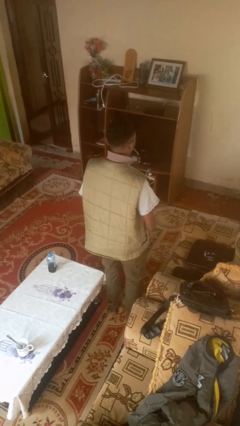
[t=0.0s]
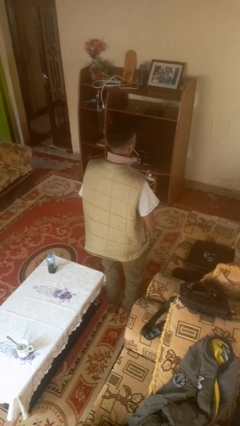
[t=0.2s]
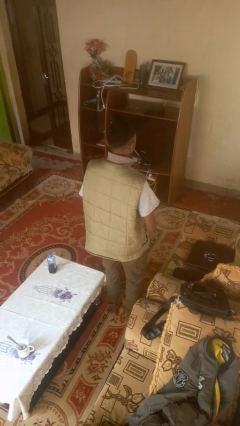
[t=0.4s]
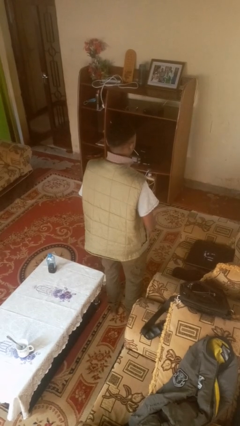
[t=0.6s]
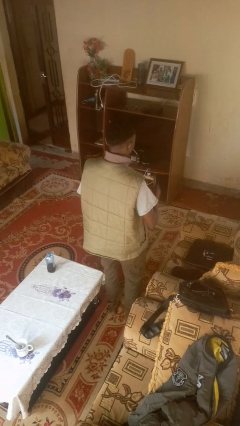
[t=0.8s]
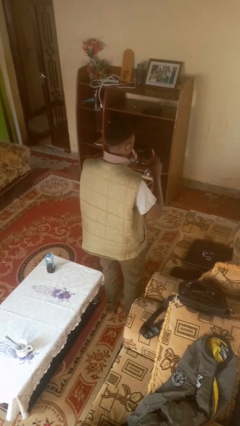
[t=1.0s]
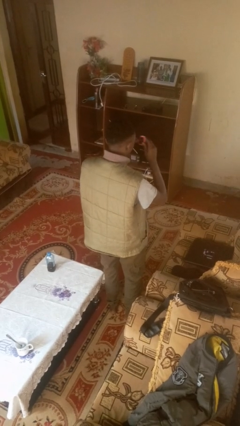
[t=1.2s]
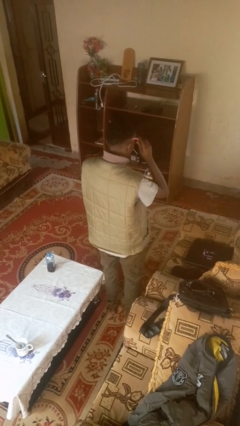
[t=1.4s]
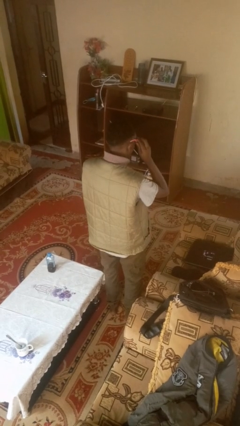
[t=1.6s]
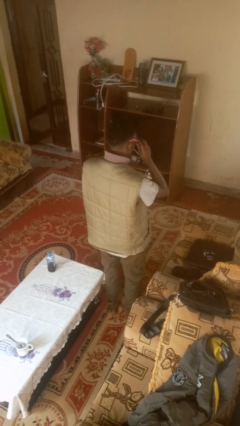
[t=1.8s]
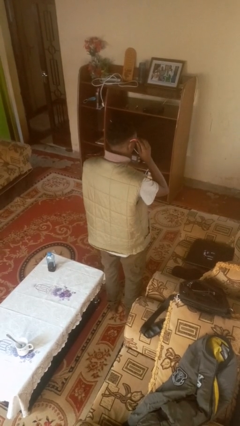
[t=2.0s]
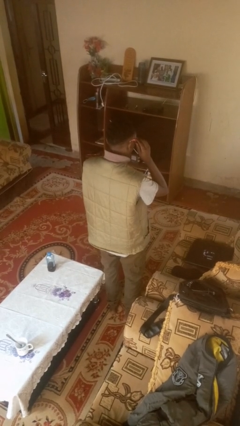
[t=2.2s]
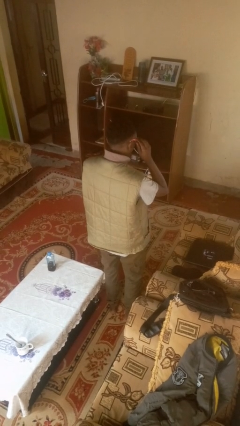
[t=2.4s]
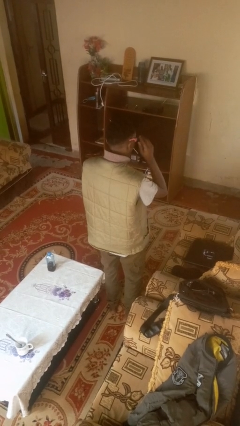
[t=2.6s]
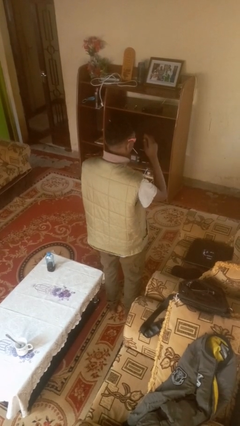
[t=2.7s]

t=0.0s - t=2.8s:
person puts on sunglasses

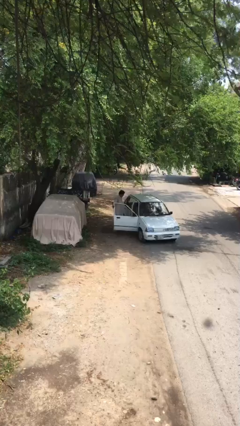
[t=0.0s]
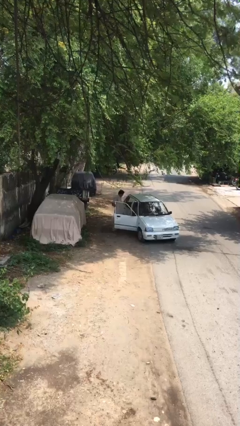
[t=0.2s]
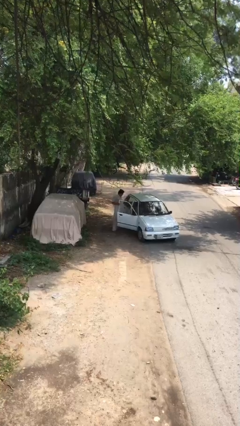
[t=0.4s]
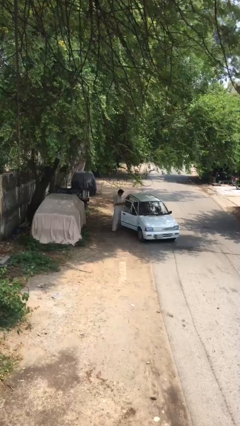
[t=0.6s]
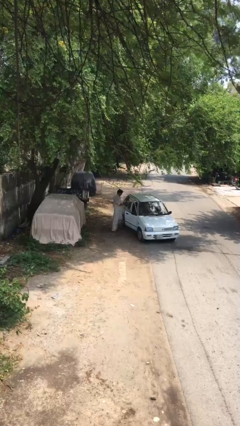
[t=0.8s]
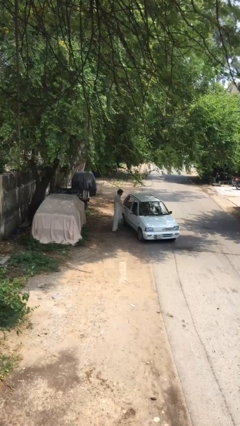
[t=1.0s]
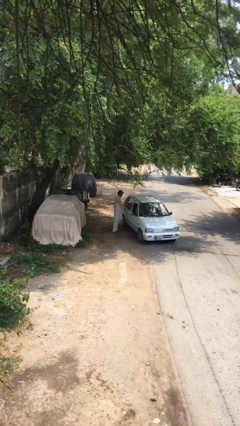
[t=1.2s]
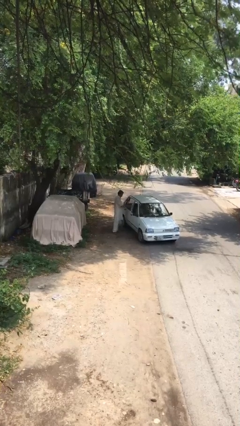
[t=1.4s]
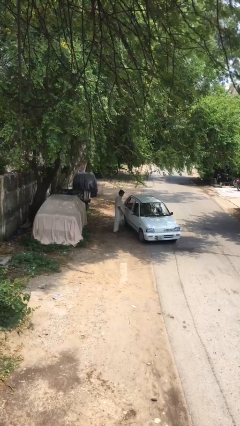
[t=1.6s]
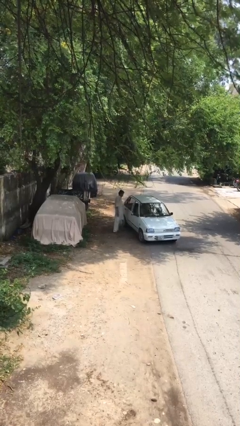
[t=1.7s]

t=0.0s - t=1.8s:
person closes car door

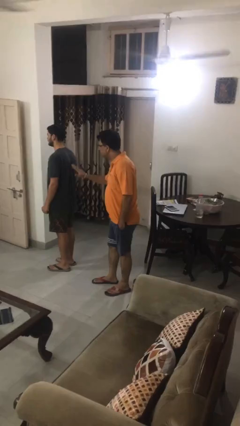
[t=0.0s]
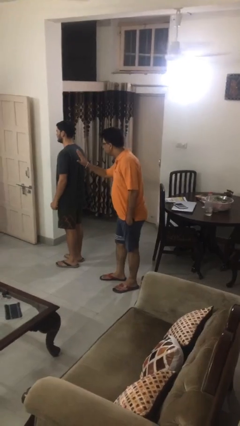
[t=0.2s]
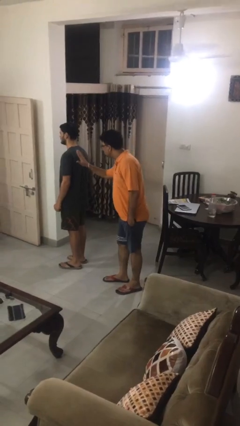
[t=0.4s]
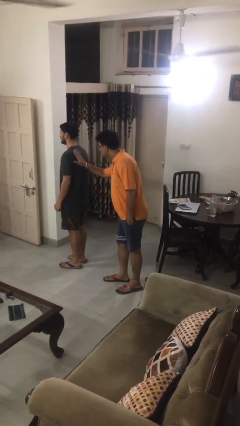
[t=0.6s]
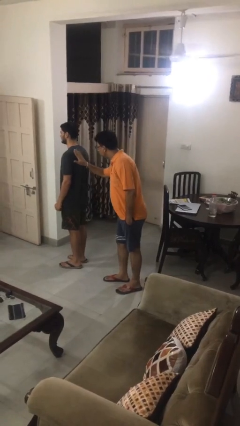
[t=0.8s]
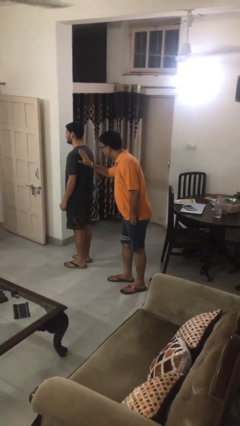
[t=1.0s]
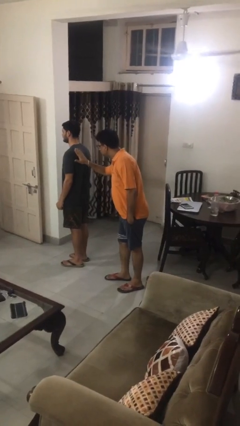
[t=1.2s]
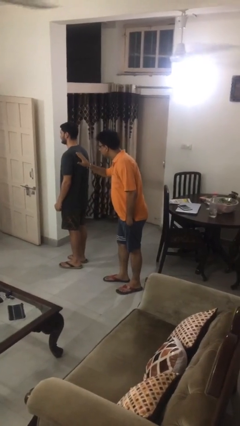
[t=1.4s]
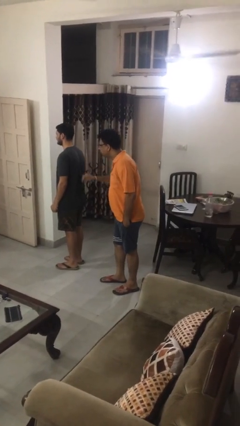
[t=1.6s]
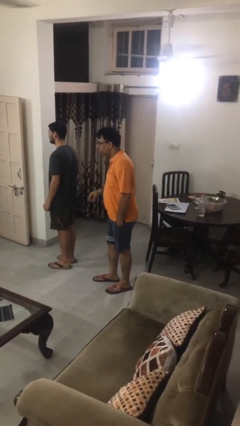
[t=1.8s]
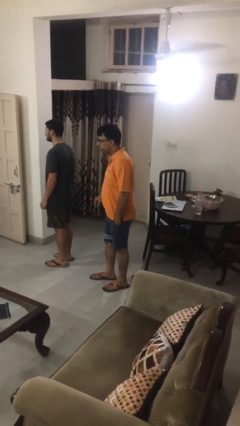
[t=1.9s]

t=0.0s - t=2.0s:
person touches back of person

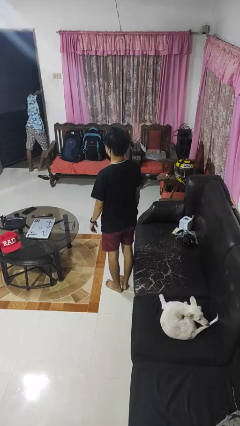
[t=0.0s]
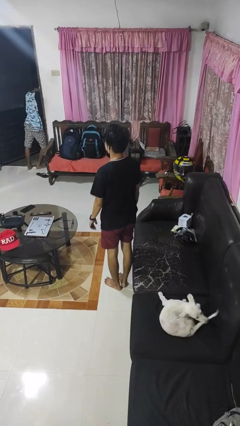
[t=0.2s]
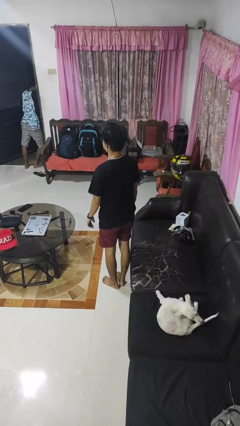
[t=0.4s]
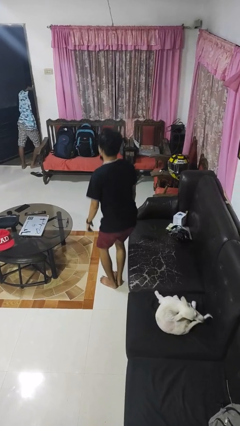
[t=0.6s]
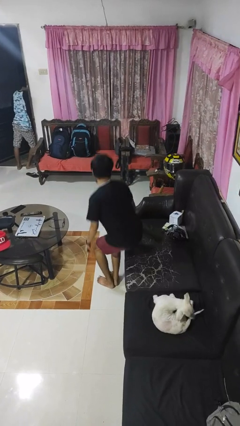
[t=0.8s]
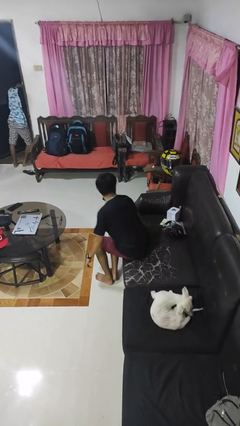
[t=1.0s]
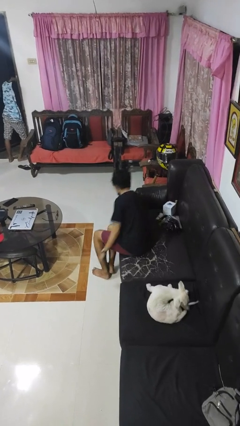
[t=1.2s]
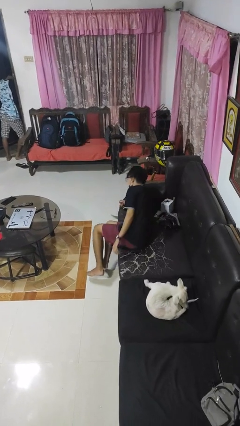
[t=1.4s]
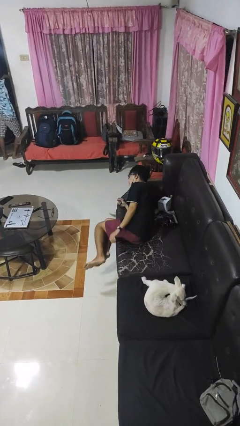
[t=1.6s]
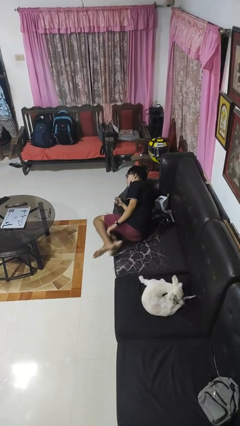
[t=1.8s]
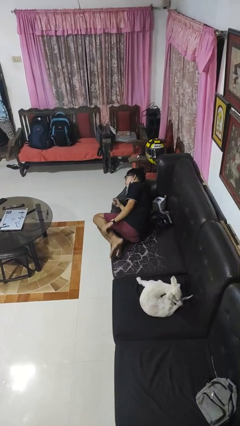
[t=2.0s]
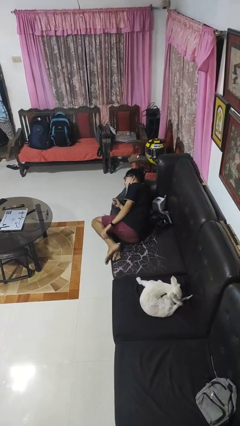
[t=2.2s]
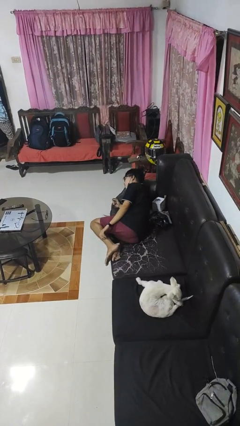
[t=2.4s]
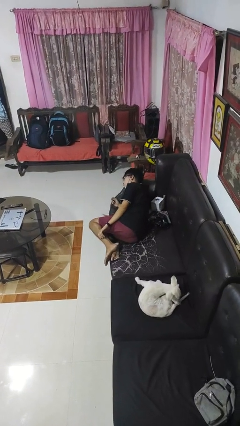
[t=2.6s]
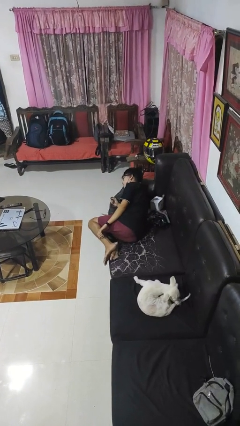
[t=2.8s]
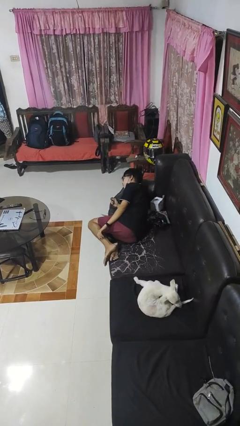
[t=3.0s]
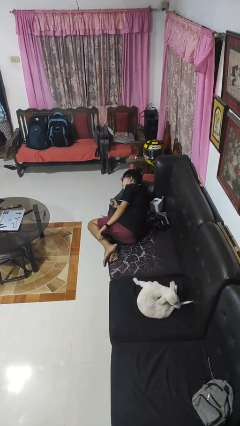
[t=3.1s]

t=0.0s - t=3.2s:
person lies down on couch

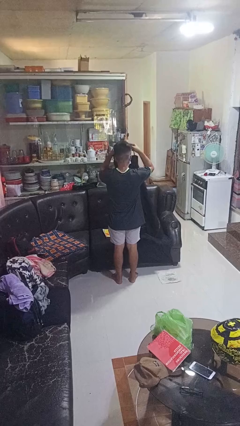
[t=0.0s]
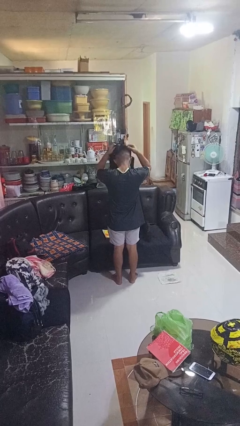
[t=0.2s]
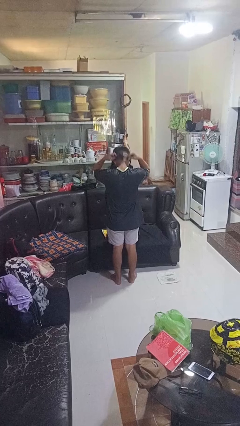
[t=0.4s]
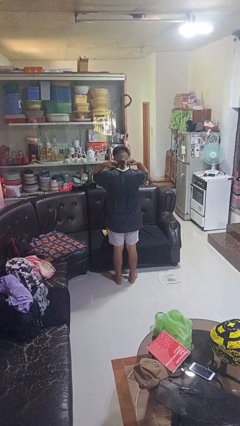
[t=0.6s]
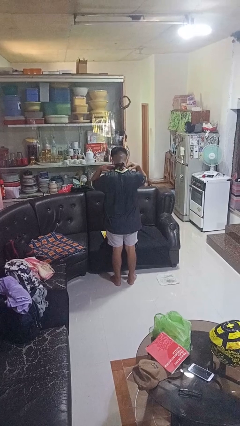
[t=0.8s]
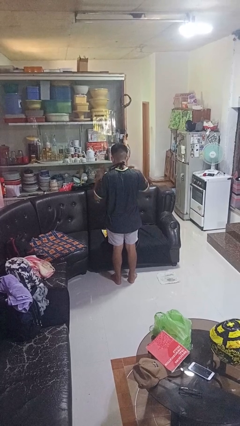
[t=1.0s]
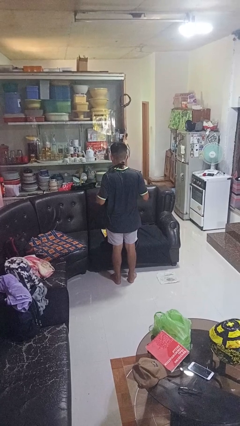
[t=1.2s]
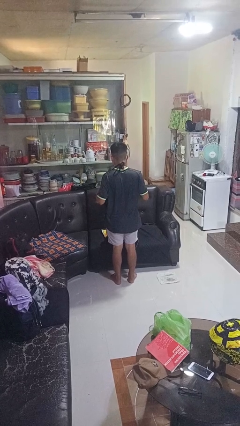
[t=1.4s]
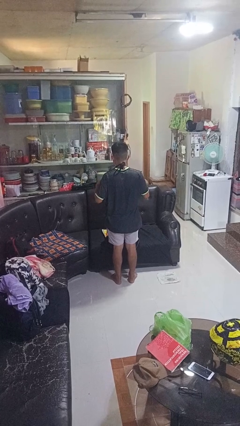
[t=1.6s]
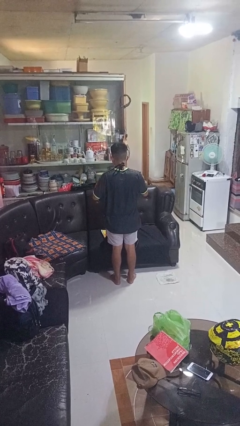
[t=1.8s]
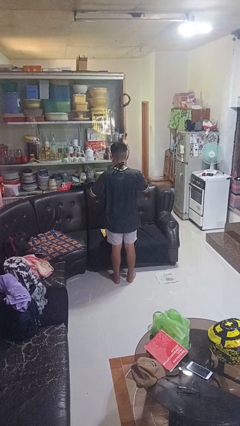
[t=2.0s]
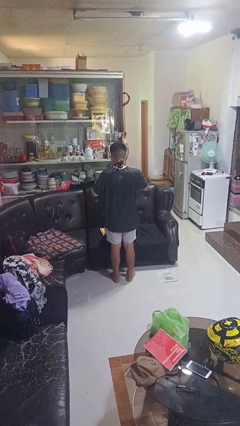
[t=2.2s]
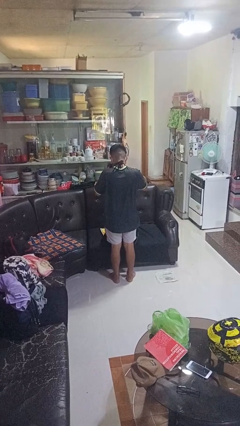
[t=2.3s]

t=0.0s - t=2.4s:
person puts on apron

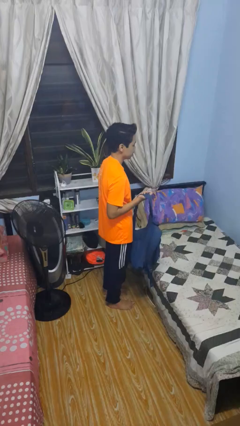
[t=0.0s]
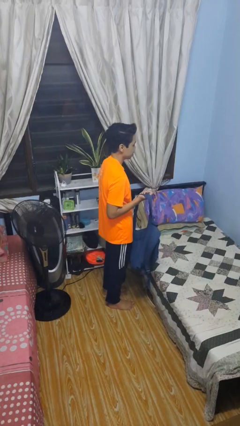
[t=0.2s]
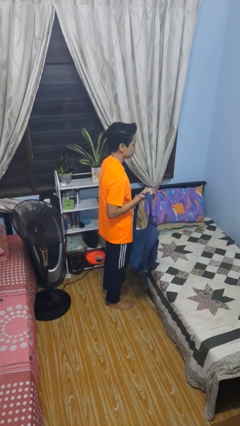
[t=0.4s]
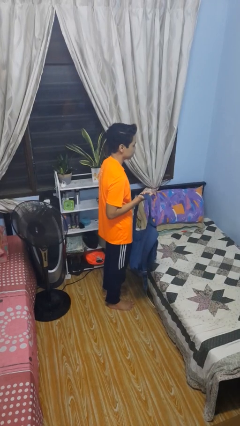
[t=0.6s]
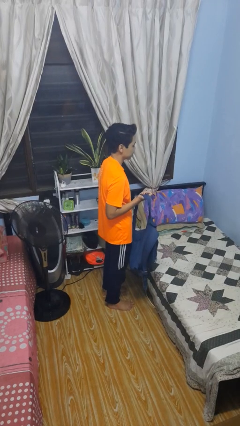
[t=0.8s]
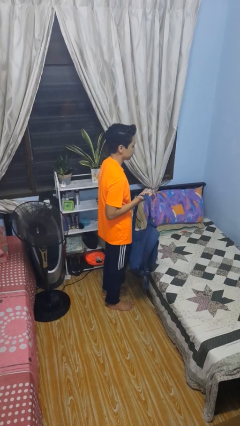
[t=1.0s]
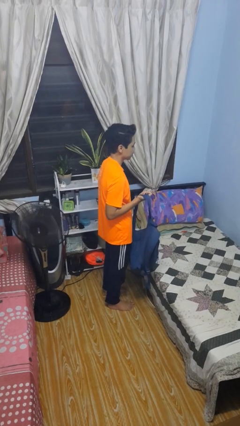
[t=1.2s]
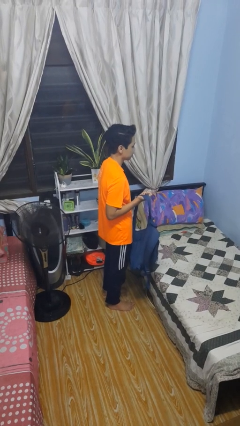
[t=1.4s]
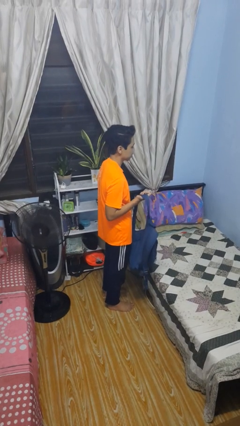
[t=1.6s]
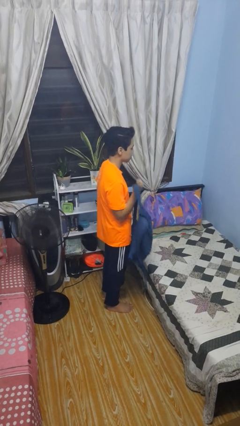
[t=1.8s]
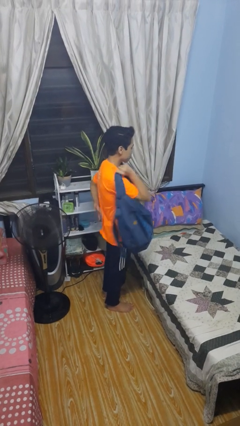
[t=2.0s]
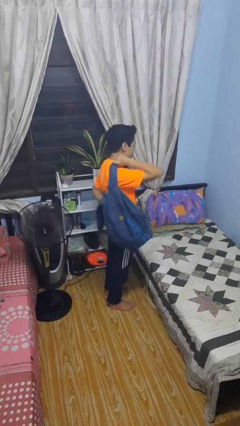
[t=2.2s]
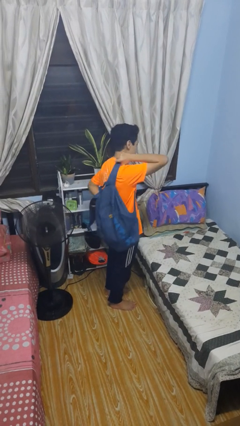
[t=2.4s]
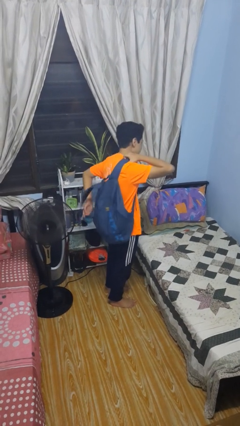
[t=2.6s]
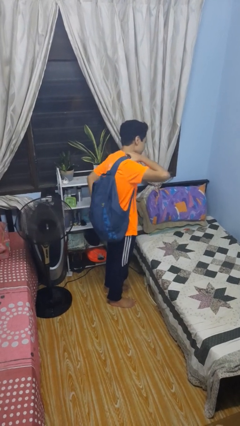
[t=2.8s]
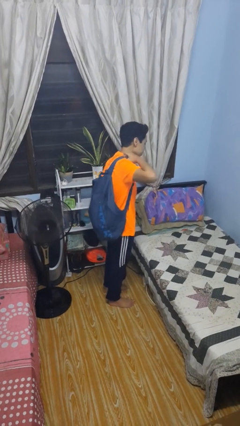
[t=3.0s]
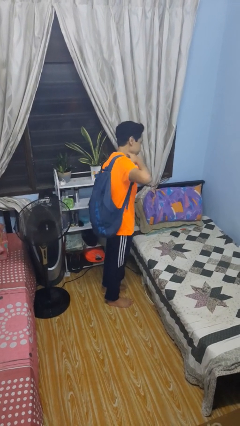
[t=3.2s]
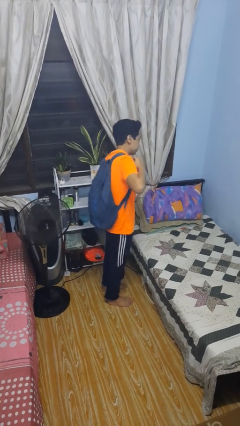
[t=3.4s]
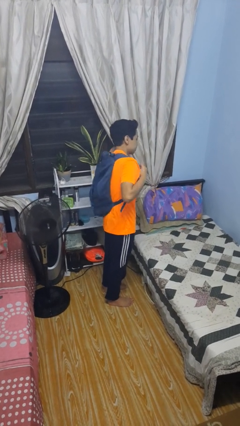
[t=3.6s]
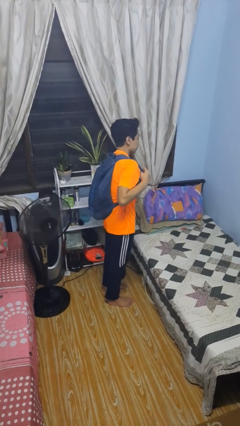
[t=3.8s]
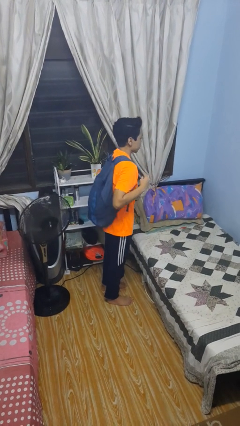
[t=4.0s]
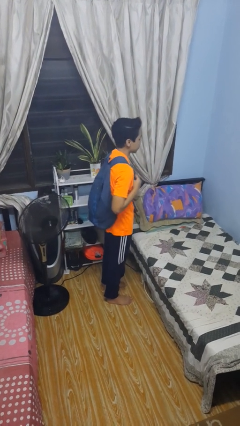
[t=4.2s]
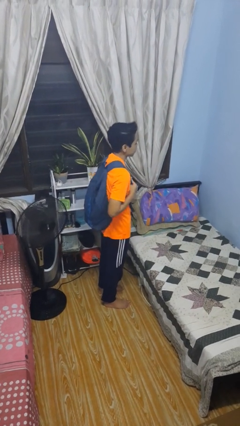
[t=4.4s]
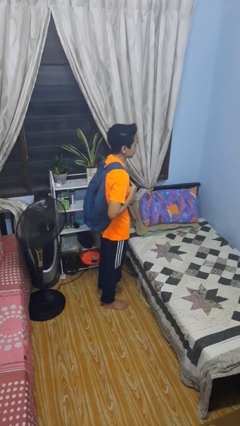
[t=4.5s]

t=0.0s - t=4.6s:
person puts on backpack

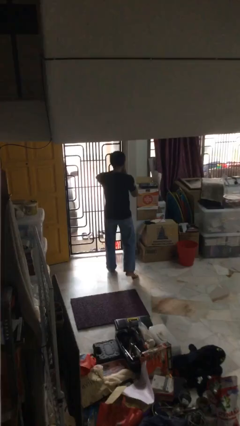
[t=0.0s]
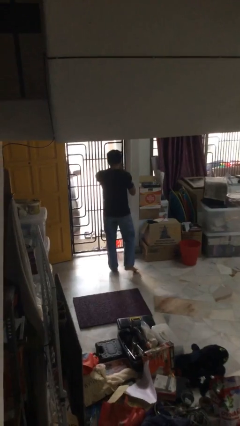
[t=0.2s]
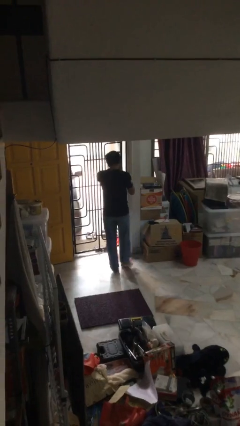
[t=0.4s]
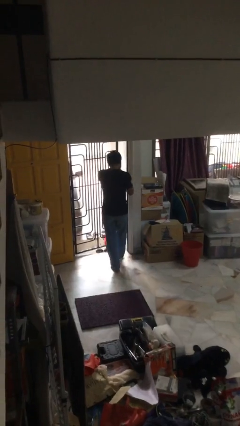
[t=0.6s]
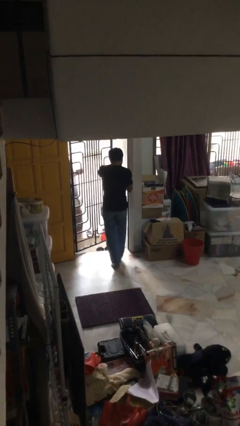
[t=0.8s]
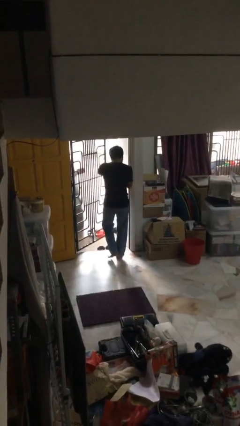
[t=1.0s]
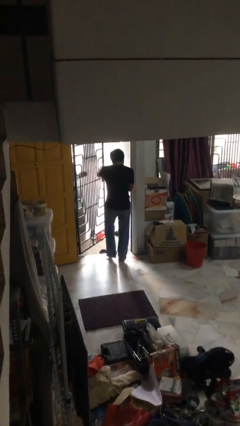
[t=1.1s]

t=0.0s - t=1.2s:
person opens facility door
